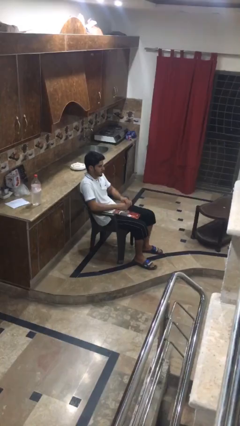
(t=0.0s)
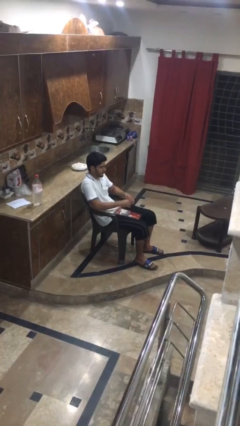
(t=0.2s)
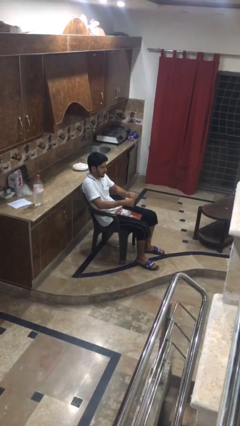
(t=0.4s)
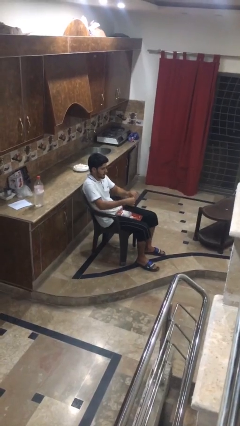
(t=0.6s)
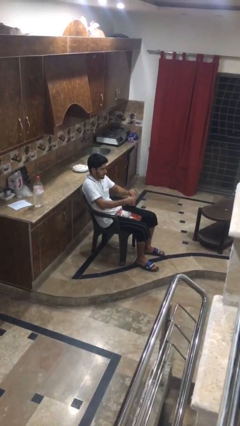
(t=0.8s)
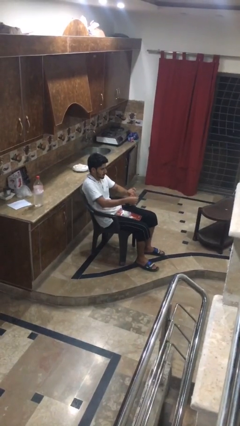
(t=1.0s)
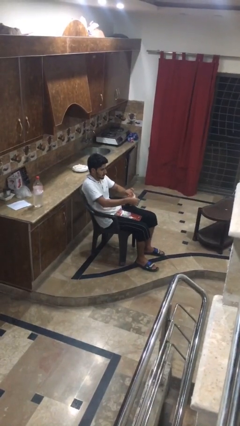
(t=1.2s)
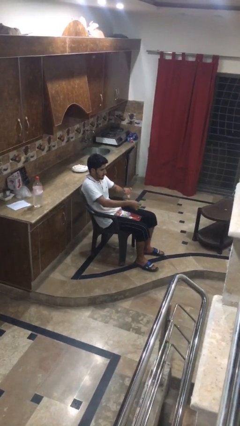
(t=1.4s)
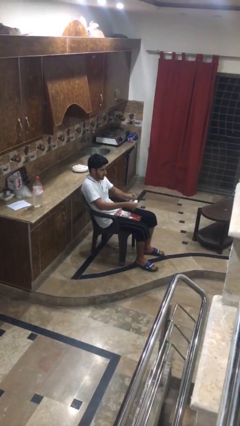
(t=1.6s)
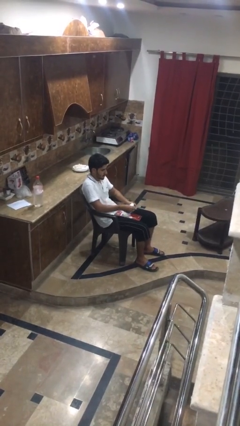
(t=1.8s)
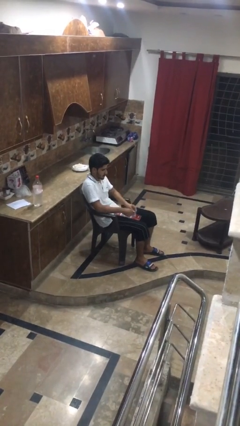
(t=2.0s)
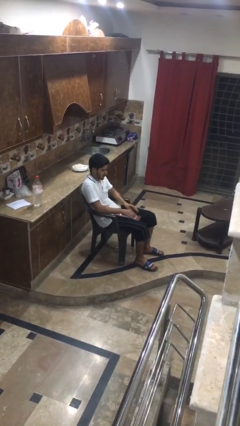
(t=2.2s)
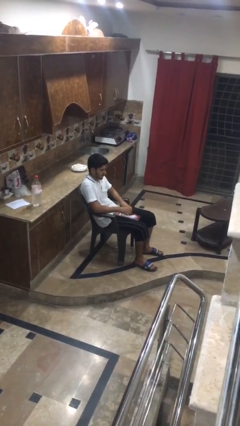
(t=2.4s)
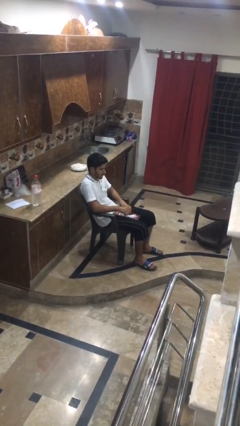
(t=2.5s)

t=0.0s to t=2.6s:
person tears paper

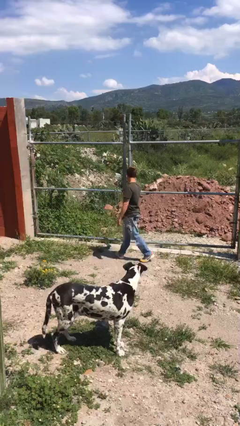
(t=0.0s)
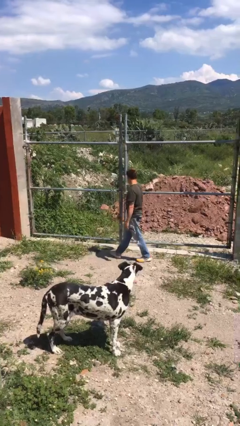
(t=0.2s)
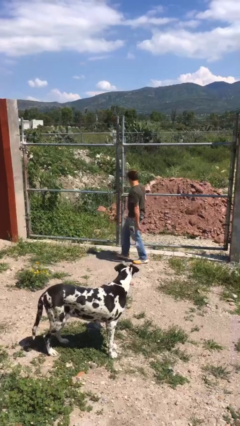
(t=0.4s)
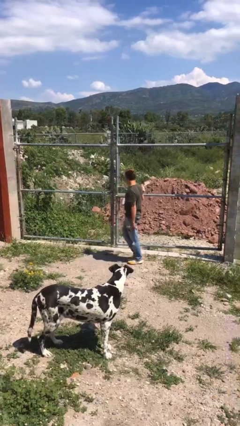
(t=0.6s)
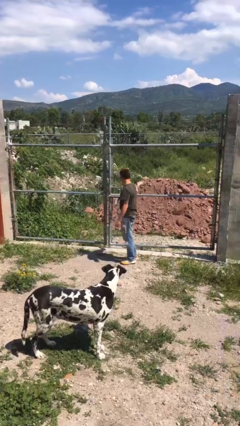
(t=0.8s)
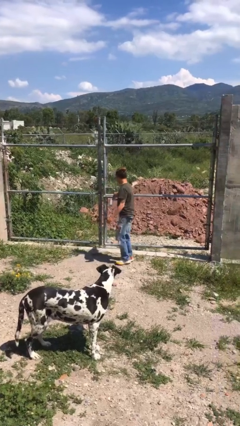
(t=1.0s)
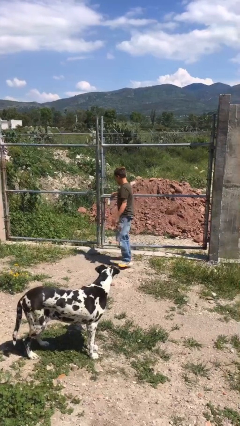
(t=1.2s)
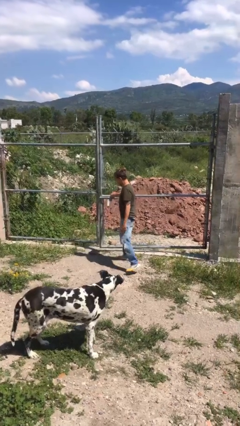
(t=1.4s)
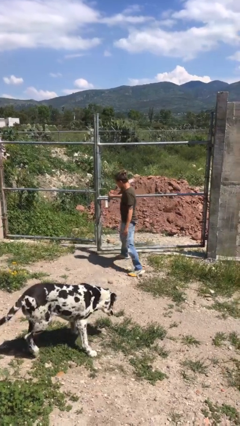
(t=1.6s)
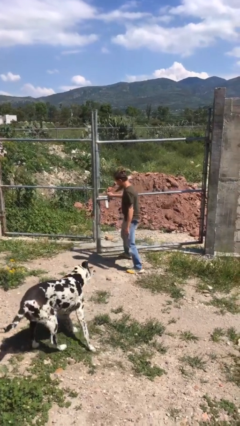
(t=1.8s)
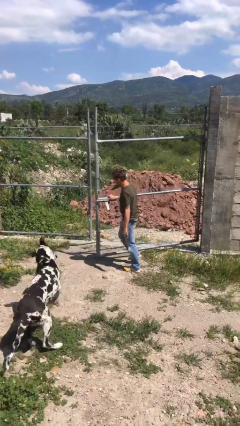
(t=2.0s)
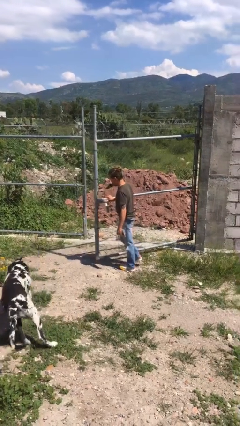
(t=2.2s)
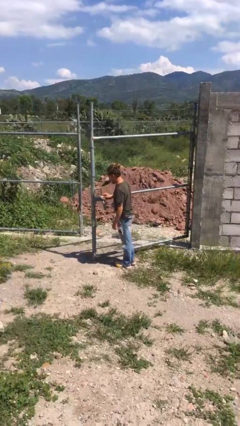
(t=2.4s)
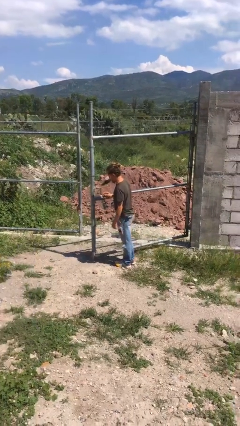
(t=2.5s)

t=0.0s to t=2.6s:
person opens gate

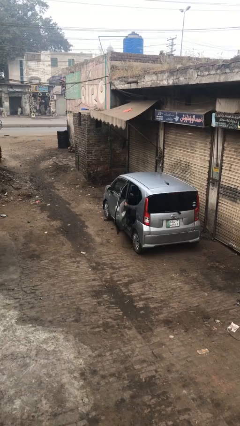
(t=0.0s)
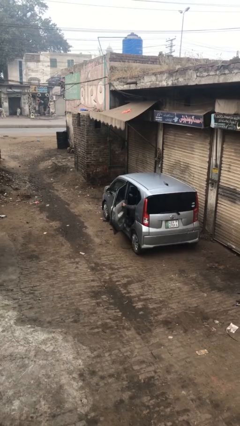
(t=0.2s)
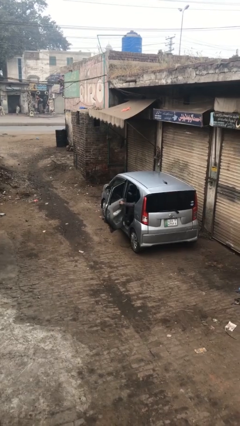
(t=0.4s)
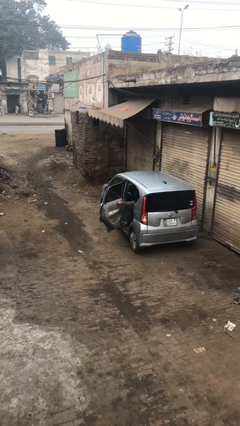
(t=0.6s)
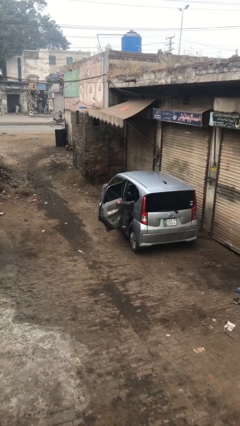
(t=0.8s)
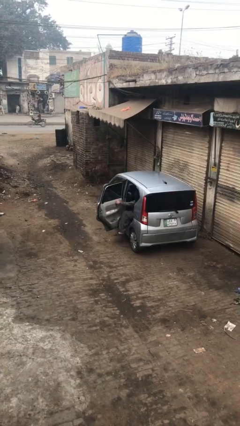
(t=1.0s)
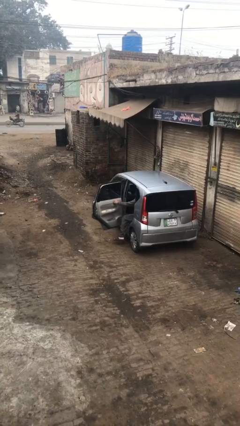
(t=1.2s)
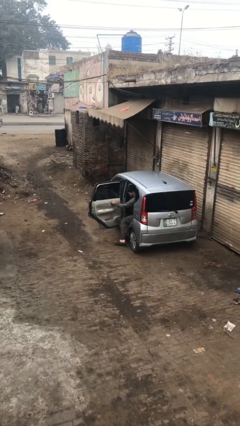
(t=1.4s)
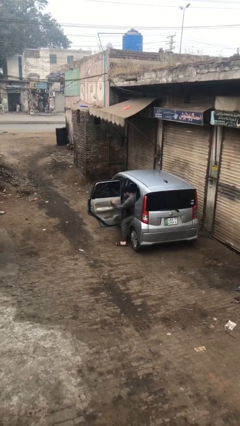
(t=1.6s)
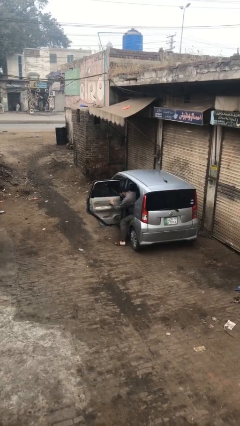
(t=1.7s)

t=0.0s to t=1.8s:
person opens car door

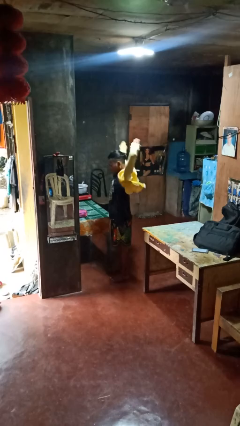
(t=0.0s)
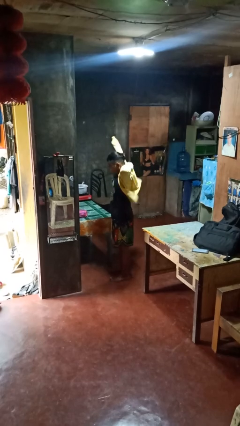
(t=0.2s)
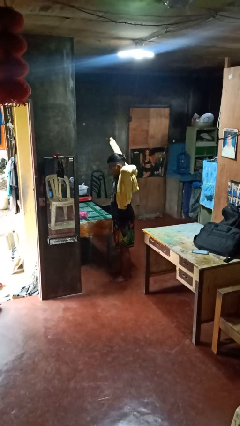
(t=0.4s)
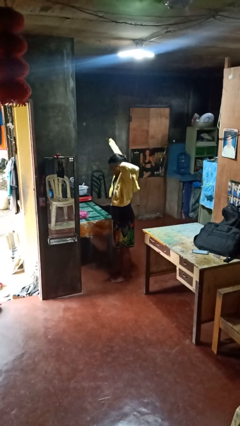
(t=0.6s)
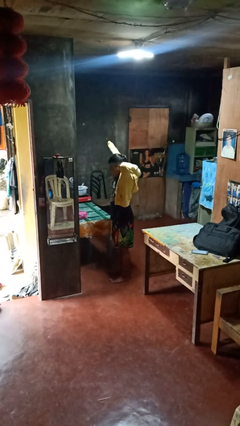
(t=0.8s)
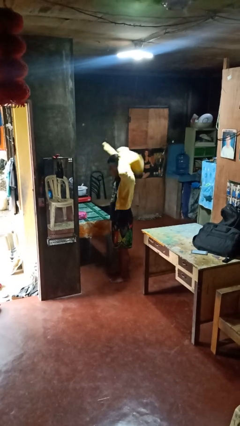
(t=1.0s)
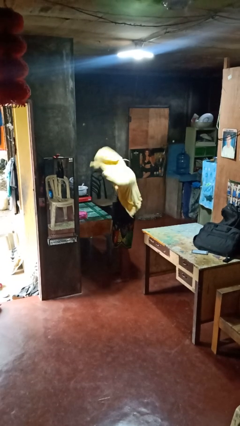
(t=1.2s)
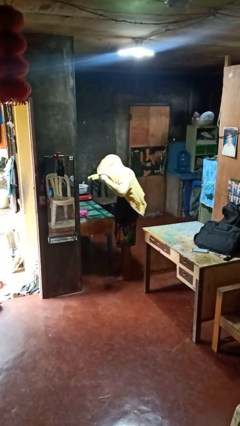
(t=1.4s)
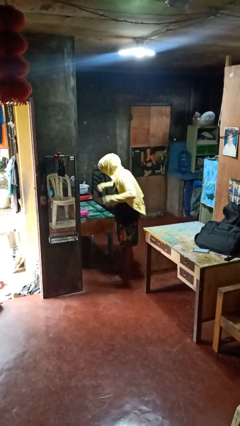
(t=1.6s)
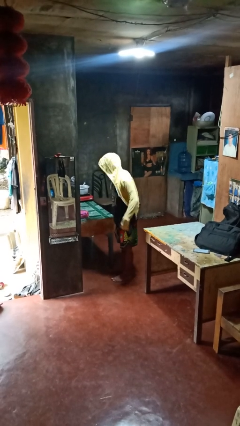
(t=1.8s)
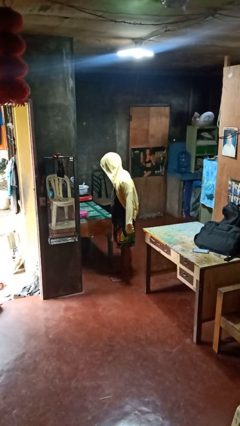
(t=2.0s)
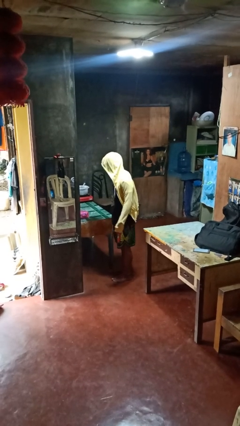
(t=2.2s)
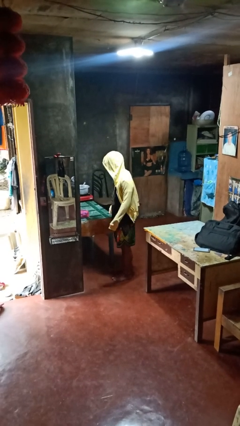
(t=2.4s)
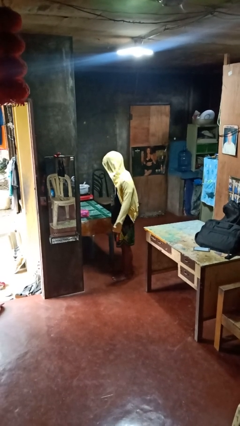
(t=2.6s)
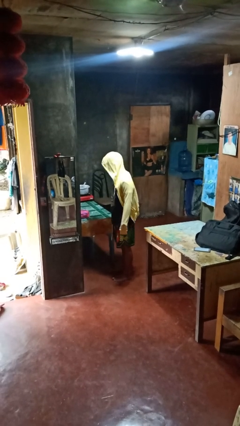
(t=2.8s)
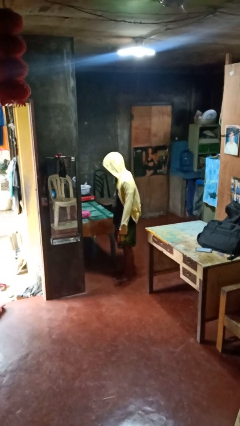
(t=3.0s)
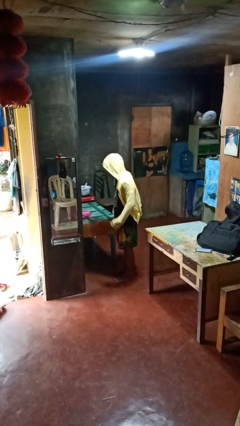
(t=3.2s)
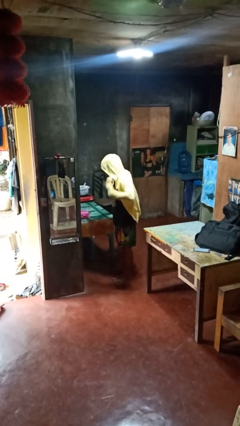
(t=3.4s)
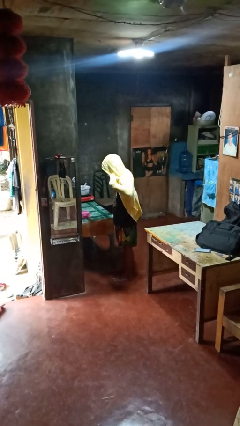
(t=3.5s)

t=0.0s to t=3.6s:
person puts on hoodie

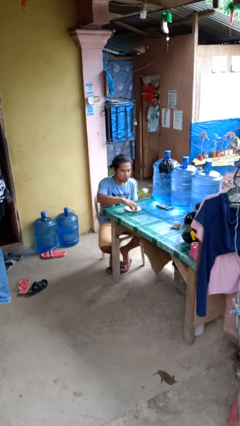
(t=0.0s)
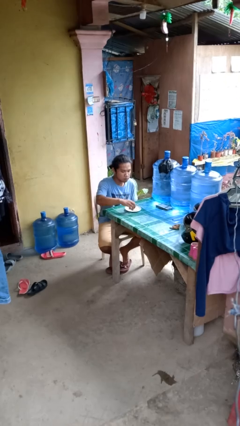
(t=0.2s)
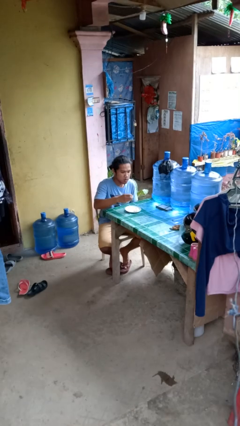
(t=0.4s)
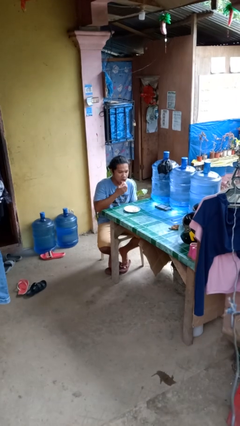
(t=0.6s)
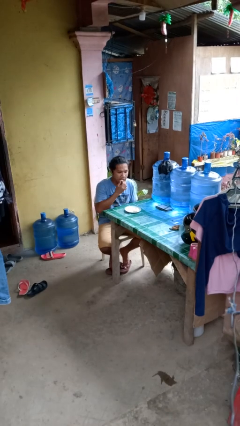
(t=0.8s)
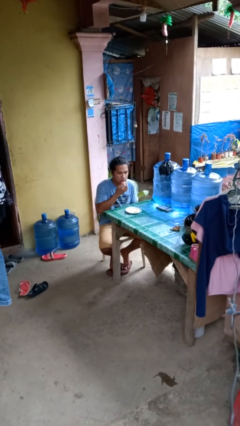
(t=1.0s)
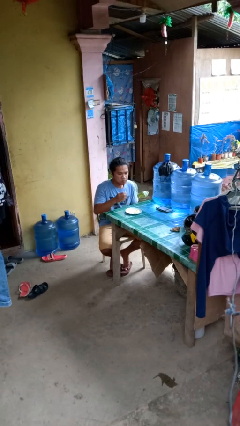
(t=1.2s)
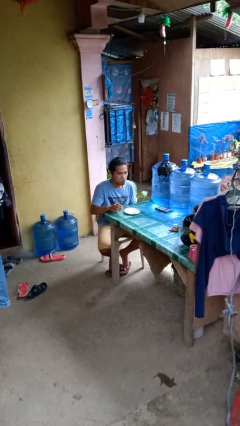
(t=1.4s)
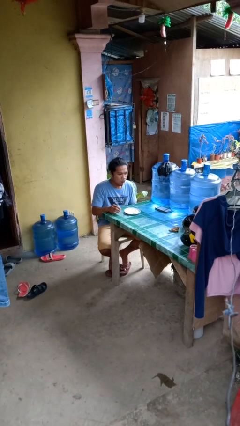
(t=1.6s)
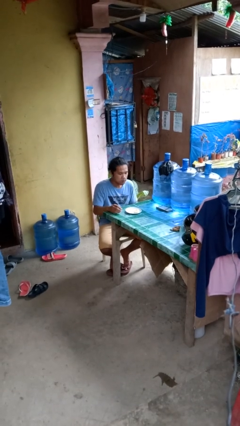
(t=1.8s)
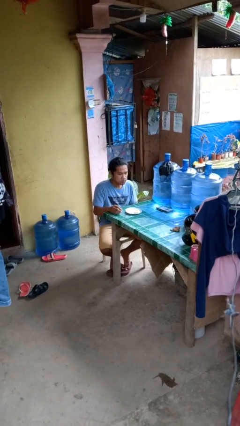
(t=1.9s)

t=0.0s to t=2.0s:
person eats with hands

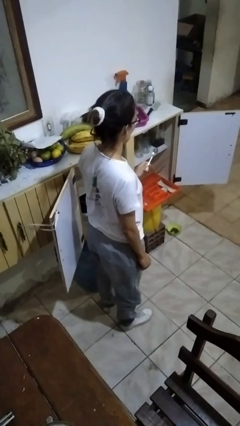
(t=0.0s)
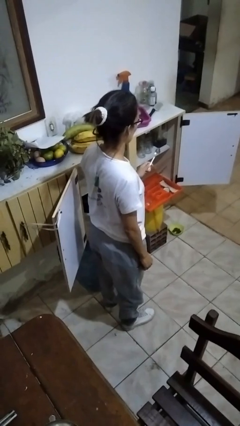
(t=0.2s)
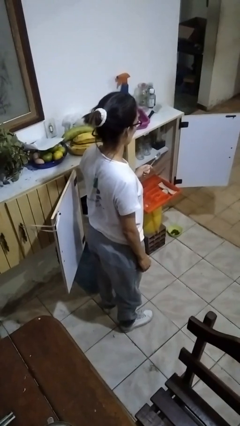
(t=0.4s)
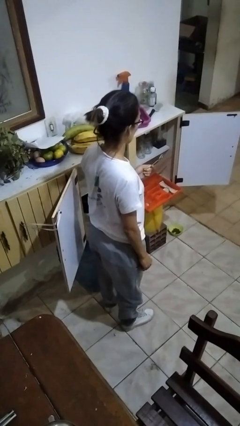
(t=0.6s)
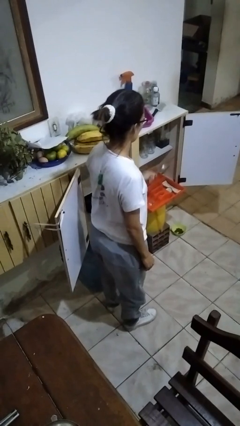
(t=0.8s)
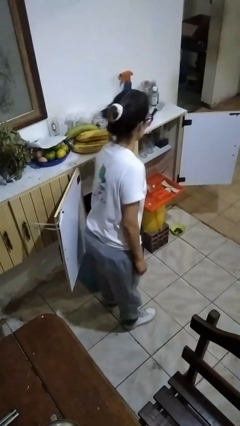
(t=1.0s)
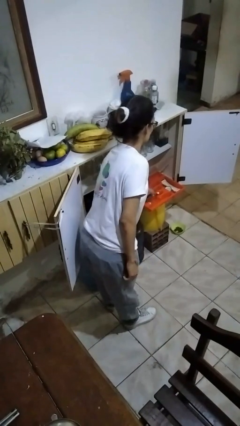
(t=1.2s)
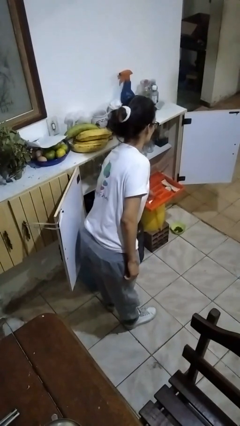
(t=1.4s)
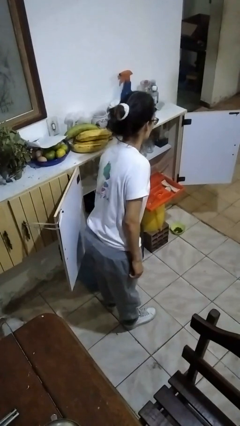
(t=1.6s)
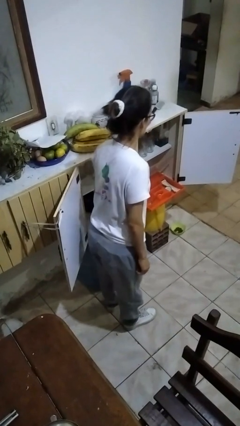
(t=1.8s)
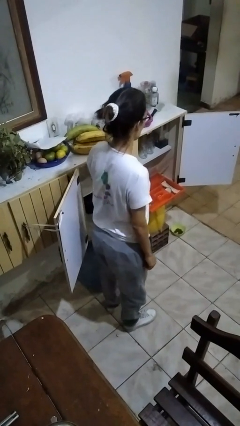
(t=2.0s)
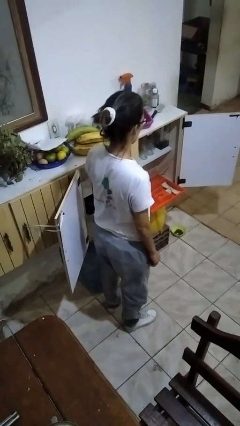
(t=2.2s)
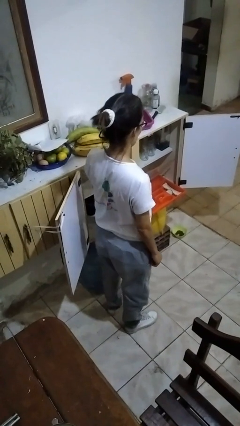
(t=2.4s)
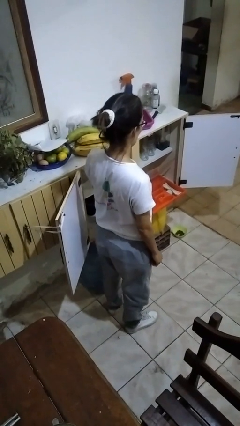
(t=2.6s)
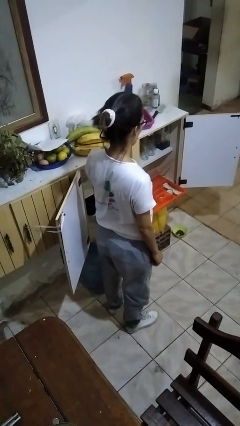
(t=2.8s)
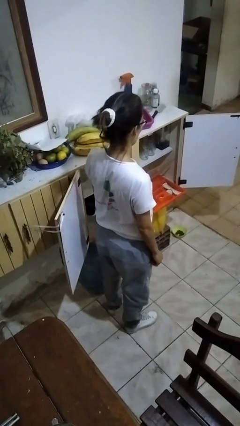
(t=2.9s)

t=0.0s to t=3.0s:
person puts object into kitchen drawer

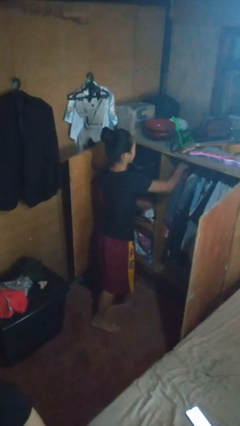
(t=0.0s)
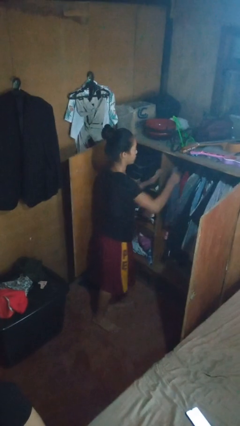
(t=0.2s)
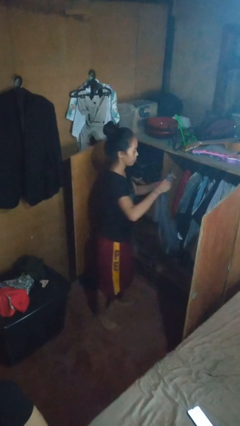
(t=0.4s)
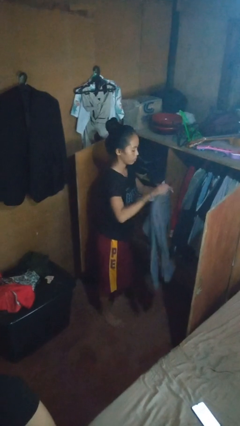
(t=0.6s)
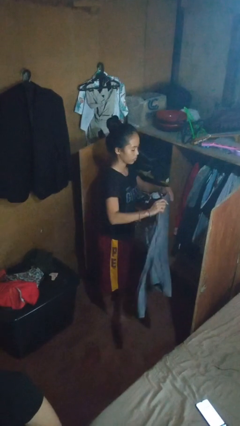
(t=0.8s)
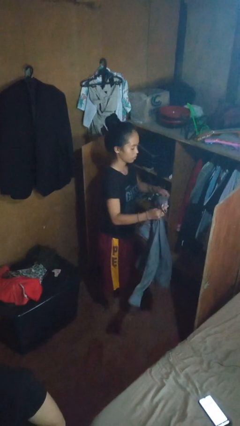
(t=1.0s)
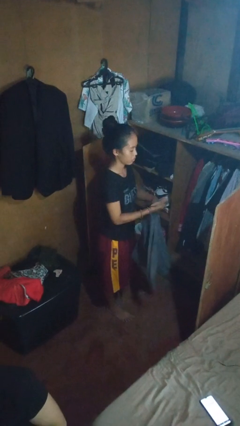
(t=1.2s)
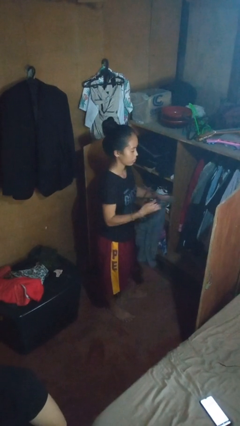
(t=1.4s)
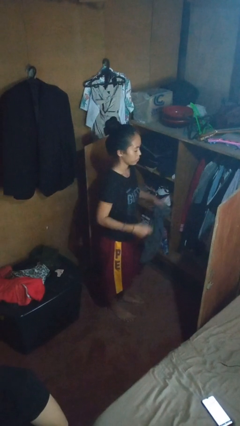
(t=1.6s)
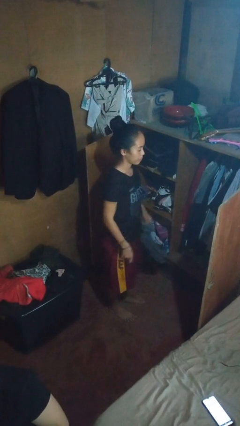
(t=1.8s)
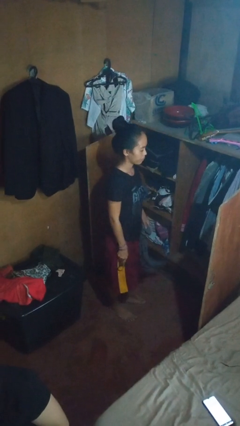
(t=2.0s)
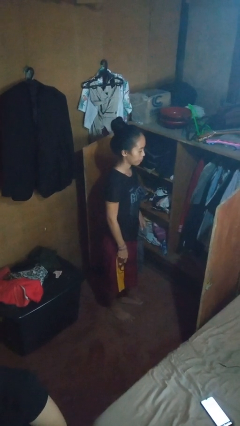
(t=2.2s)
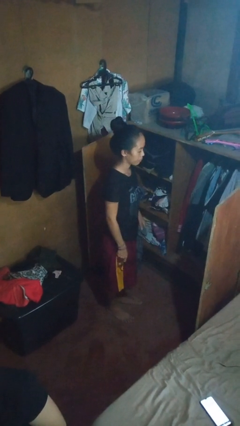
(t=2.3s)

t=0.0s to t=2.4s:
person takes clothes from closet
